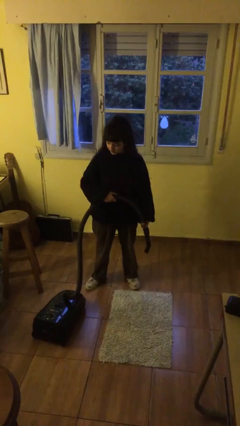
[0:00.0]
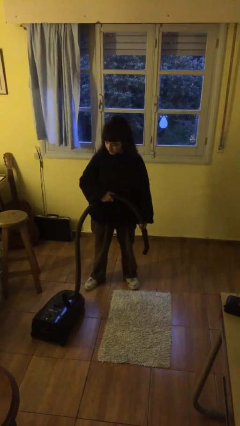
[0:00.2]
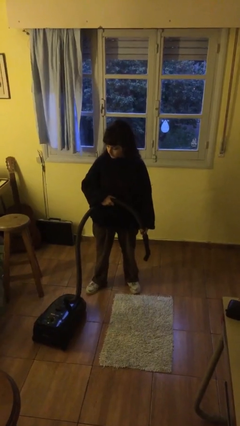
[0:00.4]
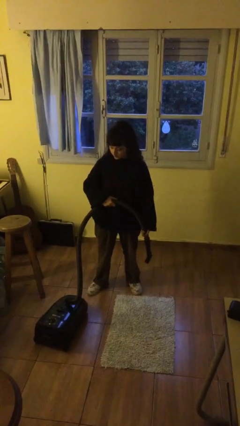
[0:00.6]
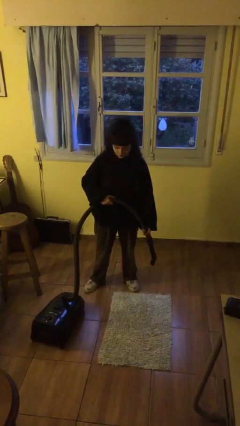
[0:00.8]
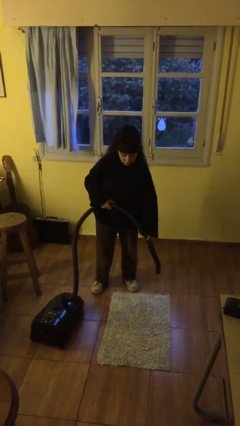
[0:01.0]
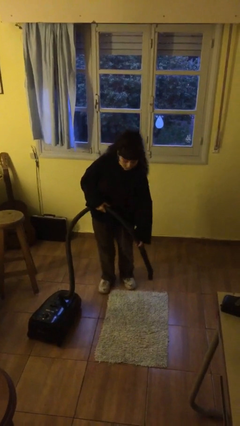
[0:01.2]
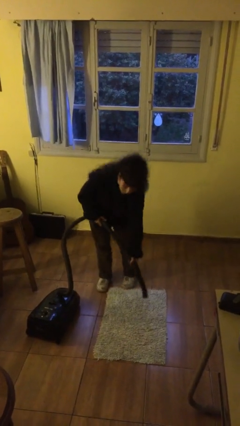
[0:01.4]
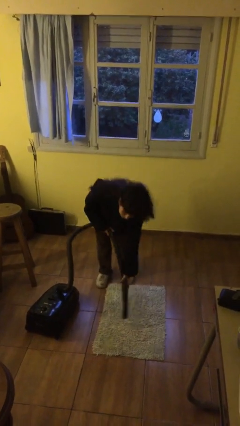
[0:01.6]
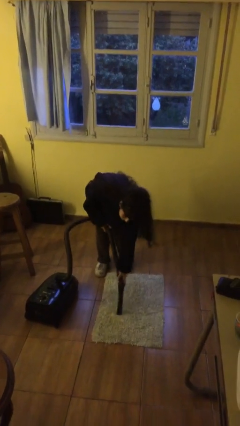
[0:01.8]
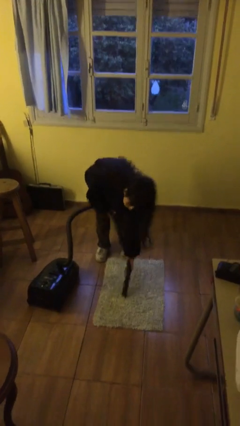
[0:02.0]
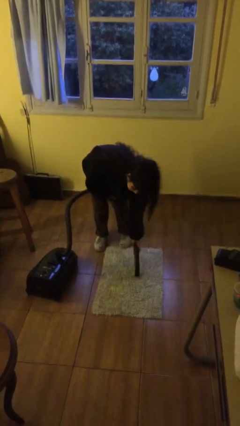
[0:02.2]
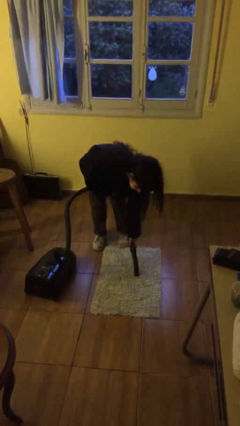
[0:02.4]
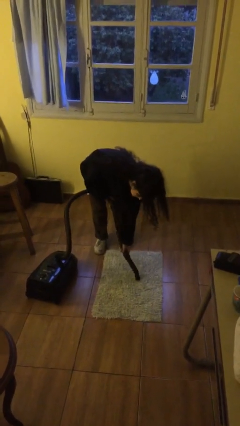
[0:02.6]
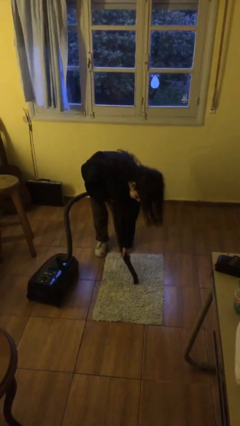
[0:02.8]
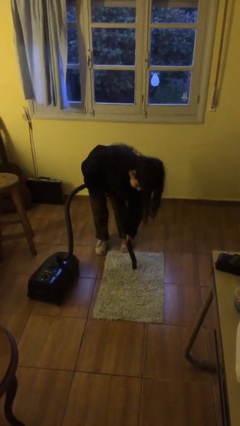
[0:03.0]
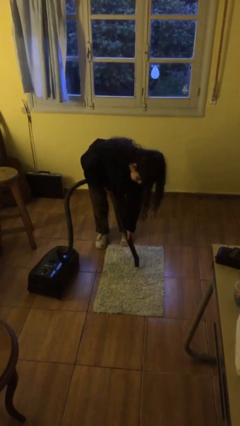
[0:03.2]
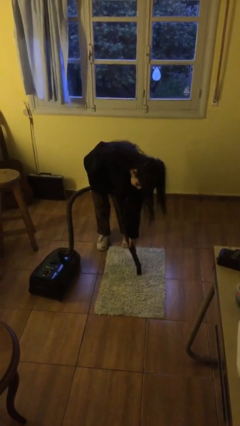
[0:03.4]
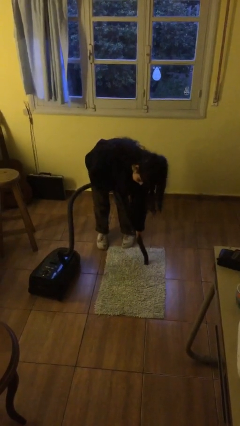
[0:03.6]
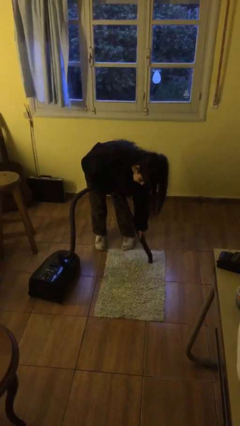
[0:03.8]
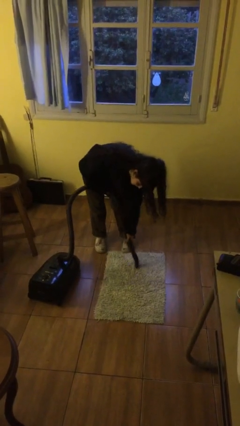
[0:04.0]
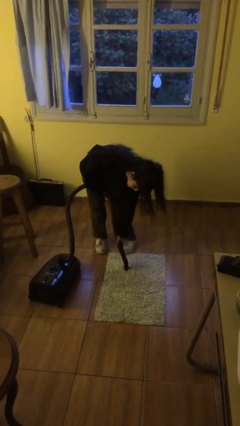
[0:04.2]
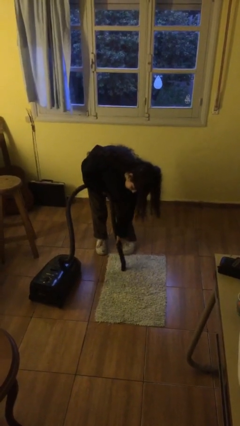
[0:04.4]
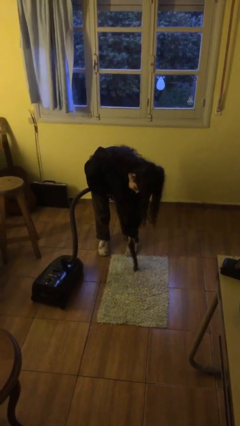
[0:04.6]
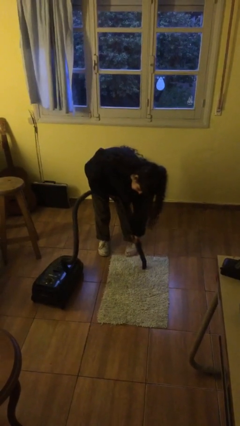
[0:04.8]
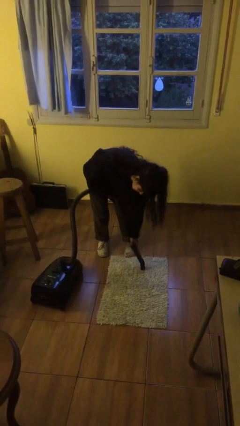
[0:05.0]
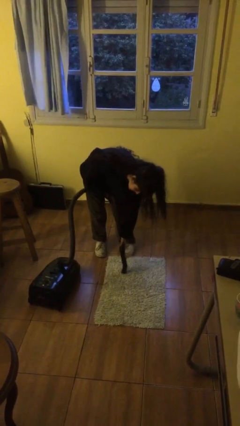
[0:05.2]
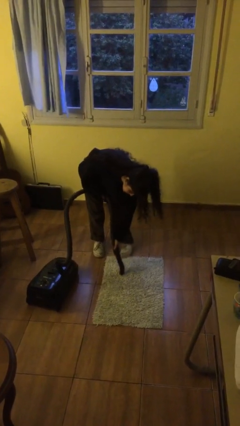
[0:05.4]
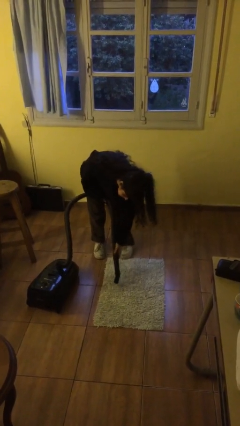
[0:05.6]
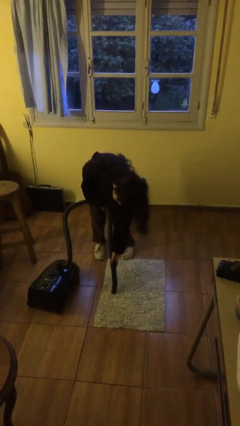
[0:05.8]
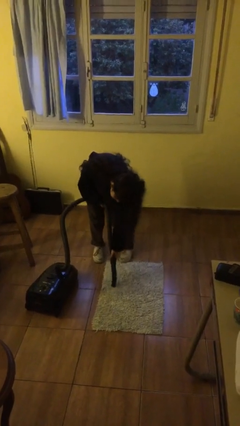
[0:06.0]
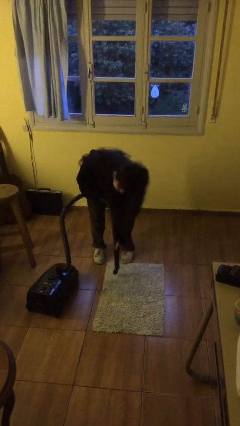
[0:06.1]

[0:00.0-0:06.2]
person vacuums carpet

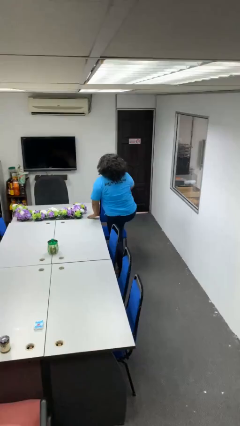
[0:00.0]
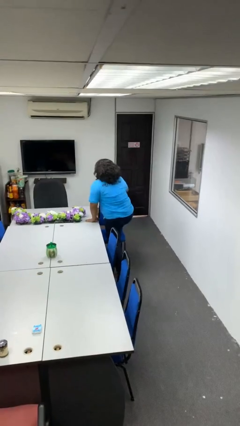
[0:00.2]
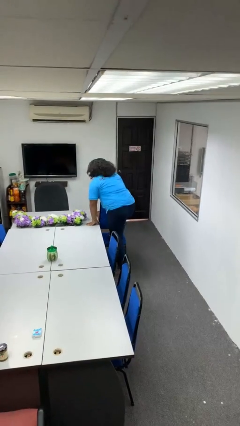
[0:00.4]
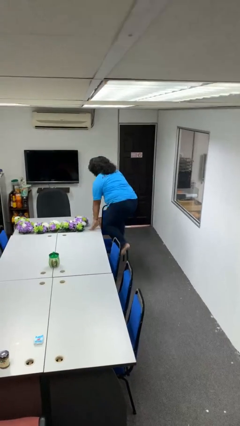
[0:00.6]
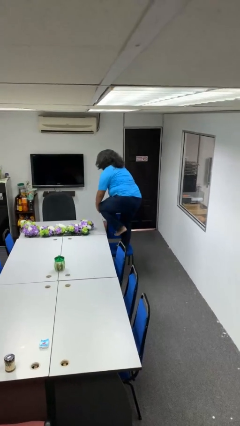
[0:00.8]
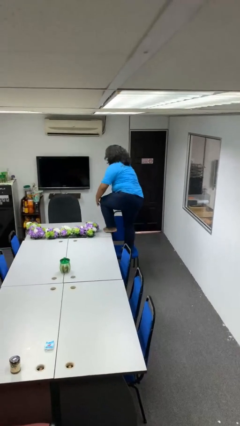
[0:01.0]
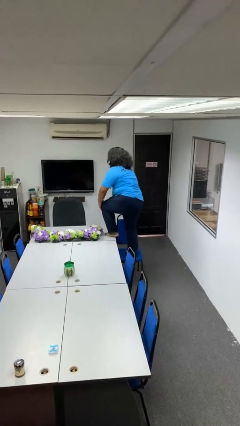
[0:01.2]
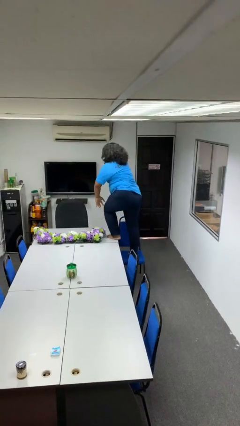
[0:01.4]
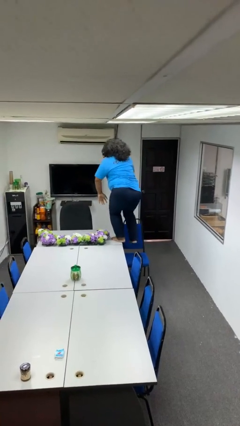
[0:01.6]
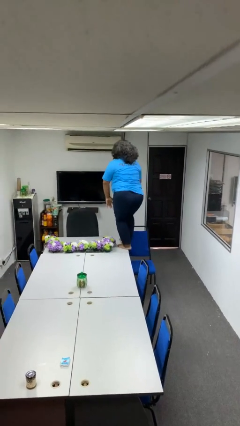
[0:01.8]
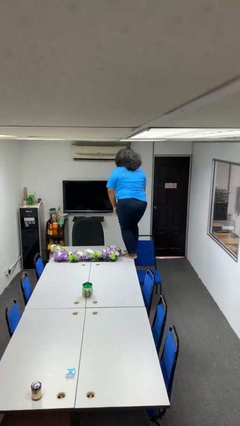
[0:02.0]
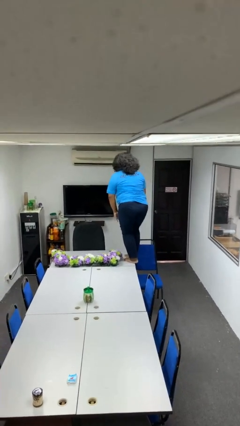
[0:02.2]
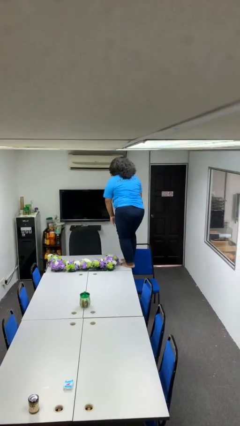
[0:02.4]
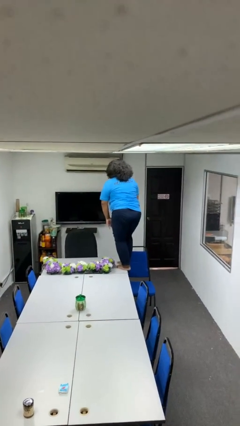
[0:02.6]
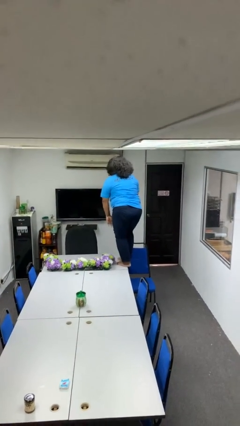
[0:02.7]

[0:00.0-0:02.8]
person climbs on table

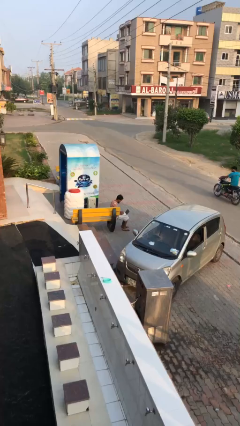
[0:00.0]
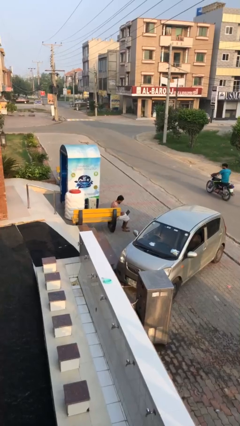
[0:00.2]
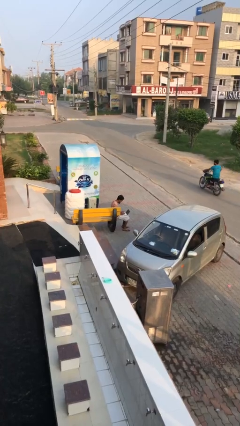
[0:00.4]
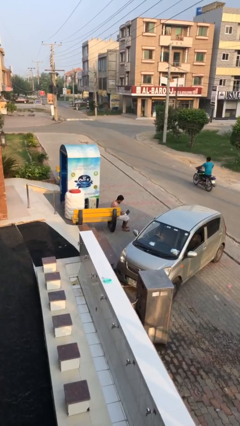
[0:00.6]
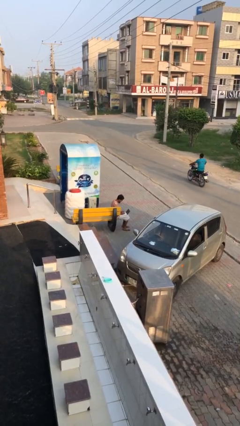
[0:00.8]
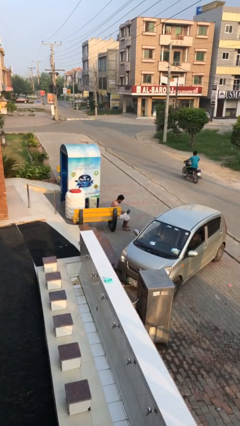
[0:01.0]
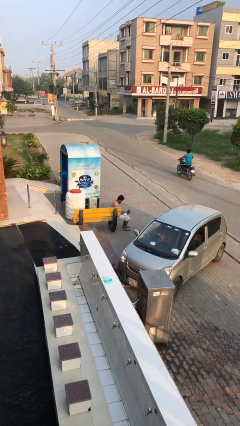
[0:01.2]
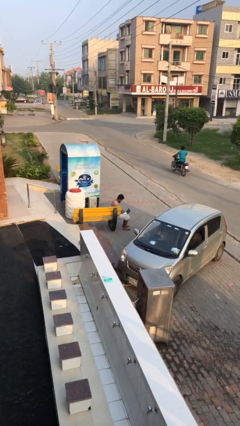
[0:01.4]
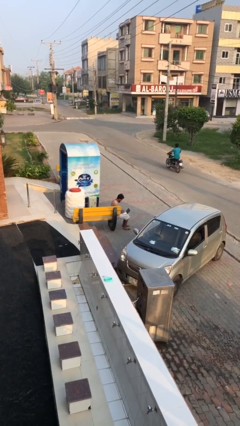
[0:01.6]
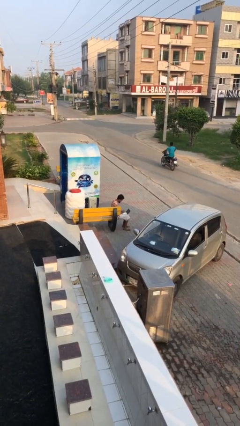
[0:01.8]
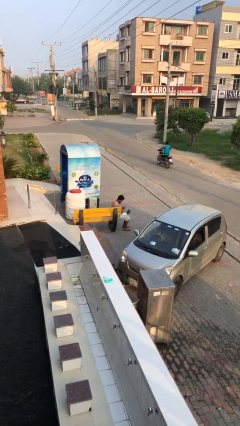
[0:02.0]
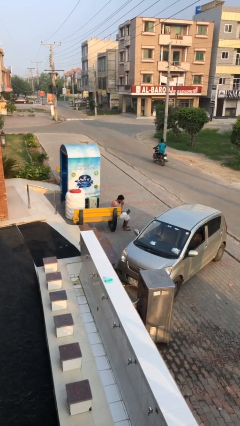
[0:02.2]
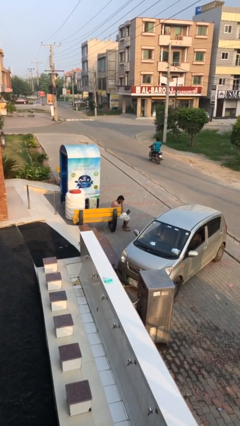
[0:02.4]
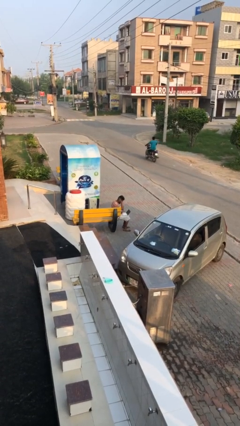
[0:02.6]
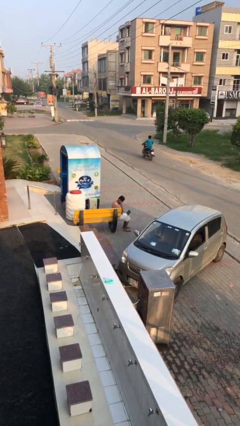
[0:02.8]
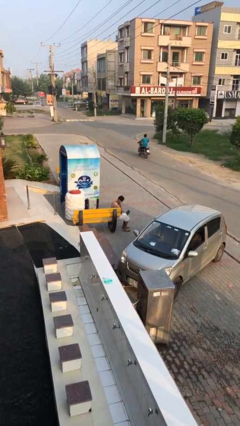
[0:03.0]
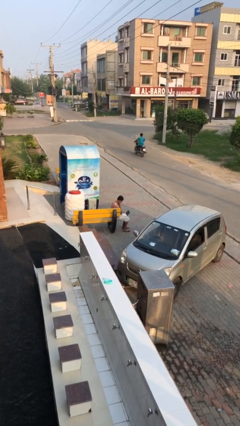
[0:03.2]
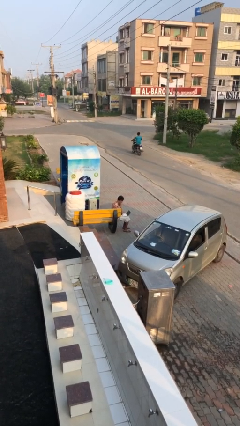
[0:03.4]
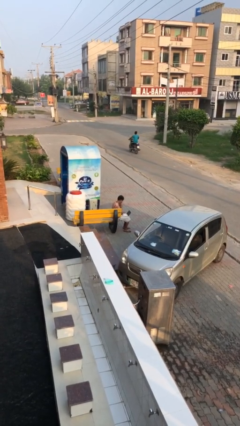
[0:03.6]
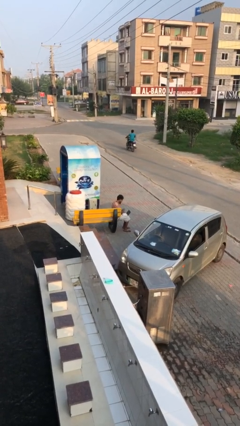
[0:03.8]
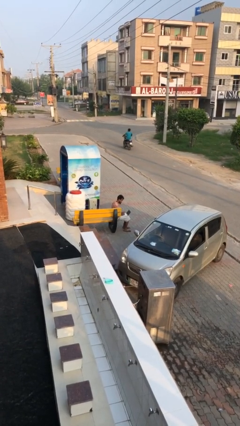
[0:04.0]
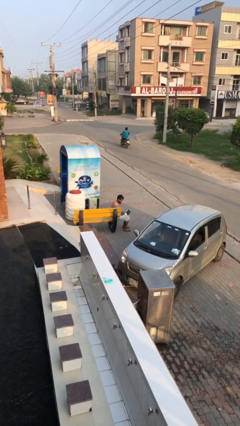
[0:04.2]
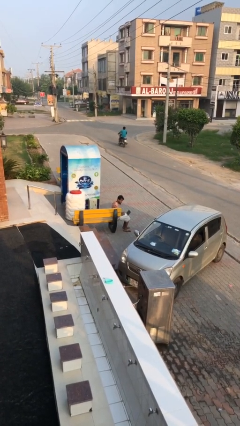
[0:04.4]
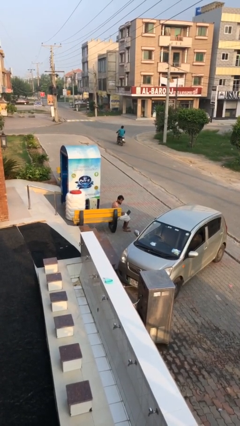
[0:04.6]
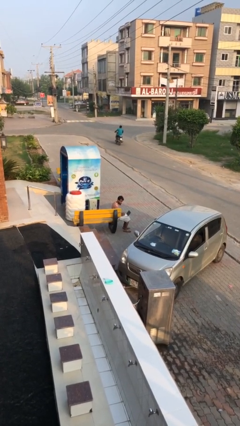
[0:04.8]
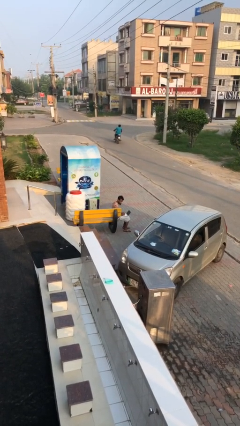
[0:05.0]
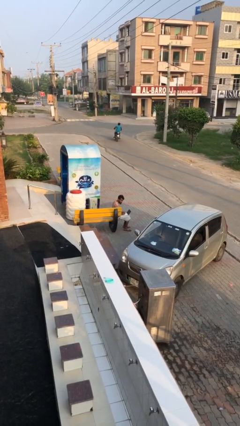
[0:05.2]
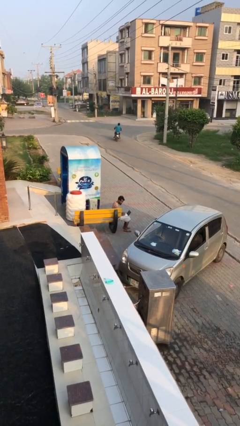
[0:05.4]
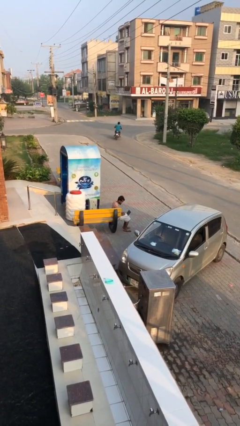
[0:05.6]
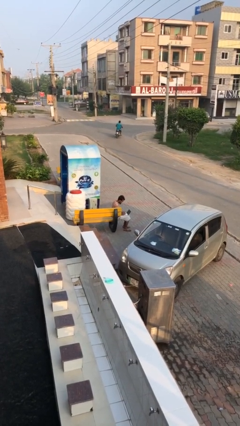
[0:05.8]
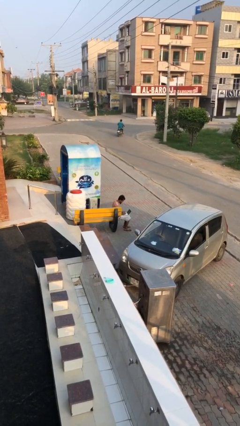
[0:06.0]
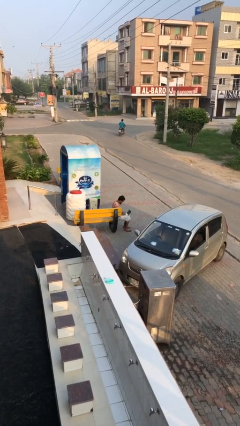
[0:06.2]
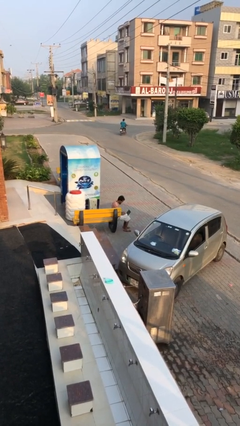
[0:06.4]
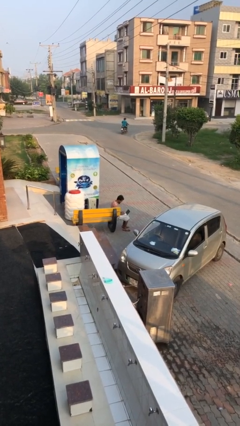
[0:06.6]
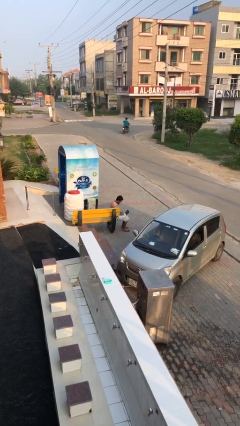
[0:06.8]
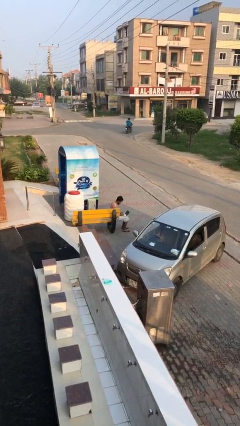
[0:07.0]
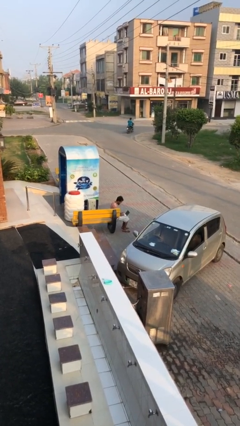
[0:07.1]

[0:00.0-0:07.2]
person interacts with laptop

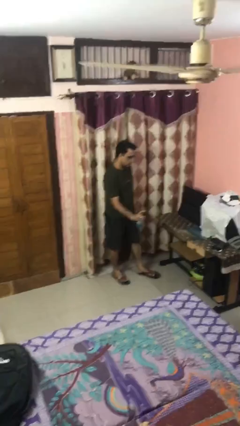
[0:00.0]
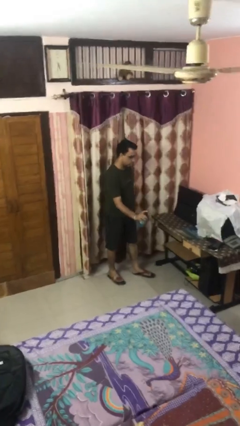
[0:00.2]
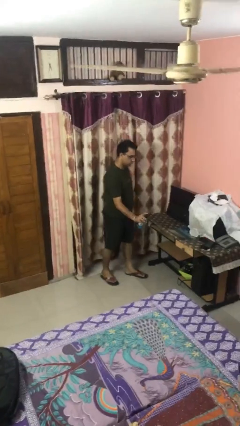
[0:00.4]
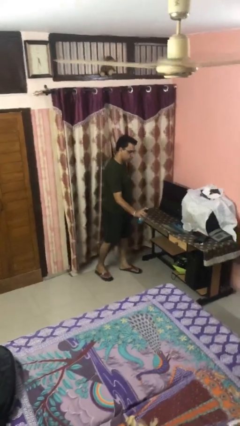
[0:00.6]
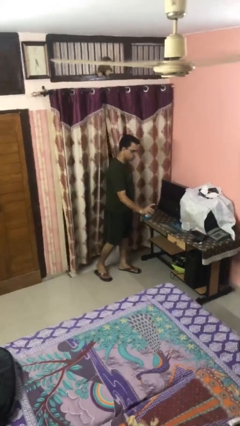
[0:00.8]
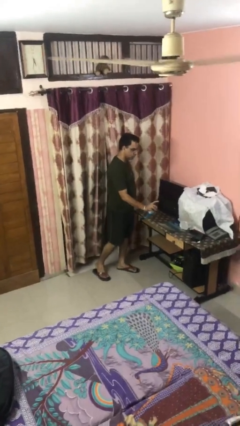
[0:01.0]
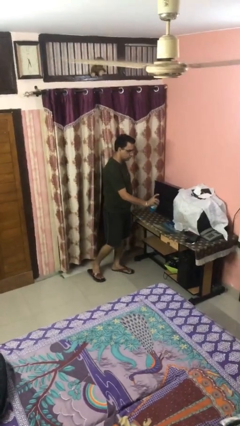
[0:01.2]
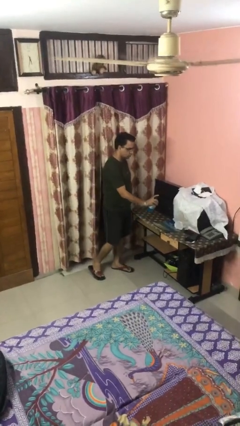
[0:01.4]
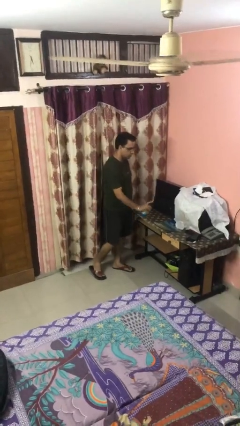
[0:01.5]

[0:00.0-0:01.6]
person sprays from bottle
